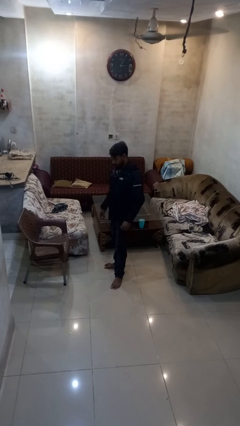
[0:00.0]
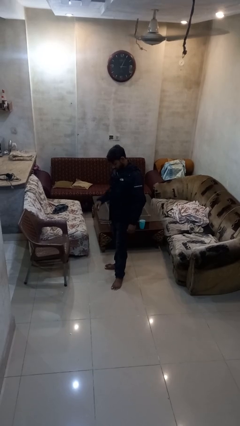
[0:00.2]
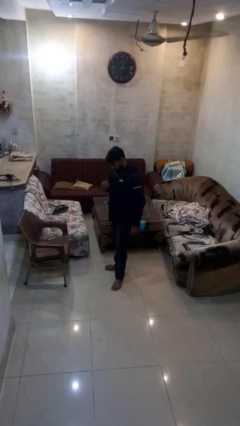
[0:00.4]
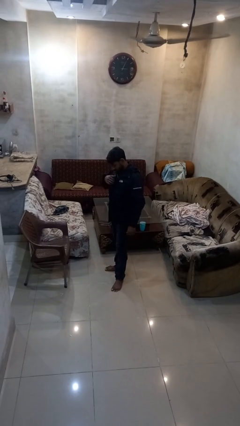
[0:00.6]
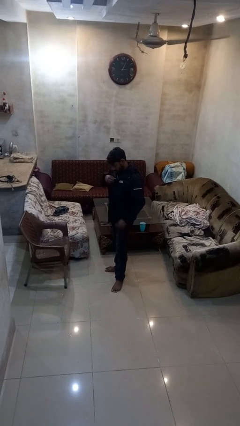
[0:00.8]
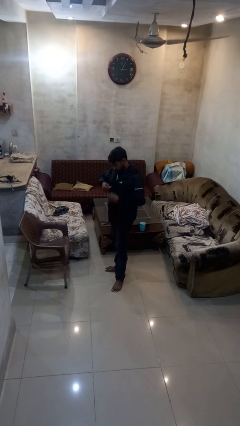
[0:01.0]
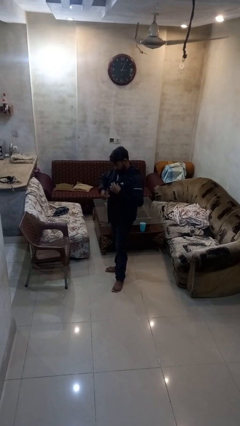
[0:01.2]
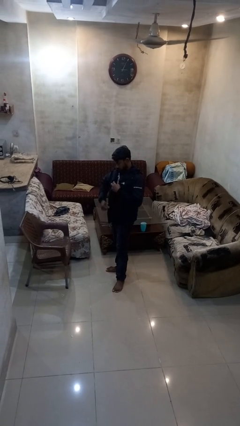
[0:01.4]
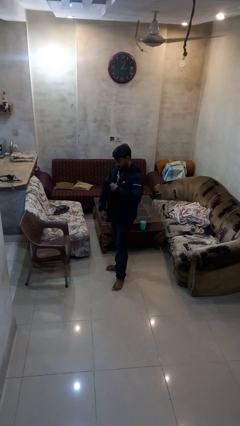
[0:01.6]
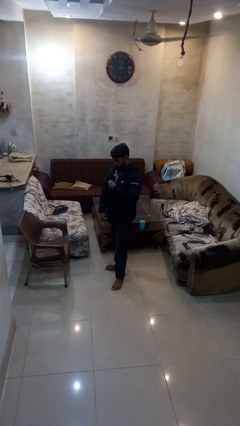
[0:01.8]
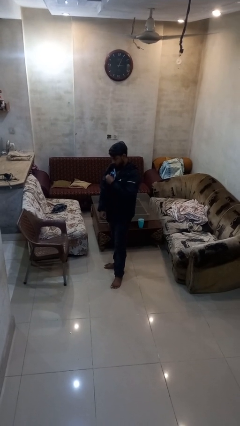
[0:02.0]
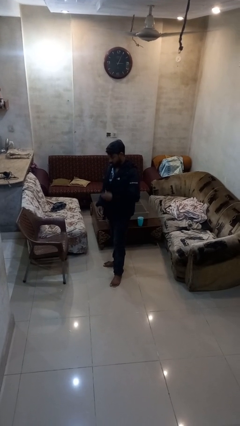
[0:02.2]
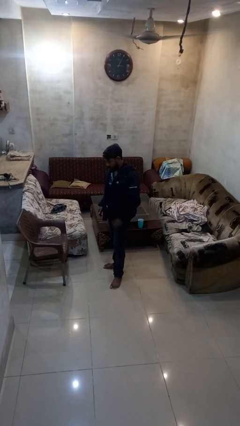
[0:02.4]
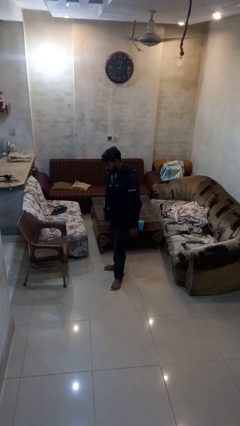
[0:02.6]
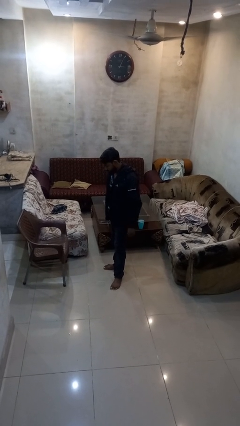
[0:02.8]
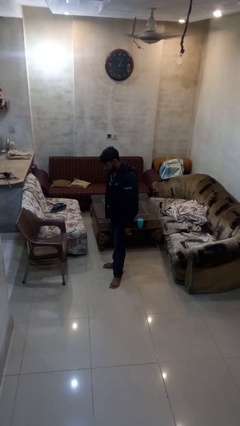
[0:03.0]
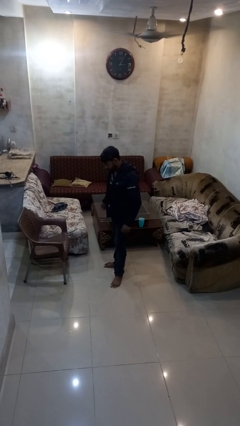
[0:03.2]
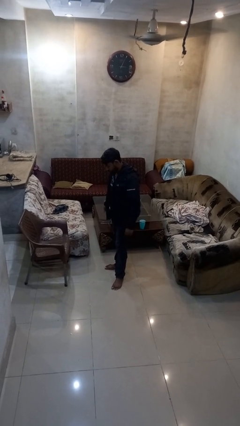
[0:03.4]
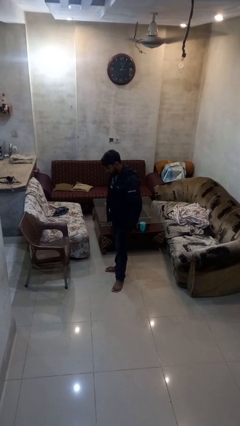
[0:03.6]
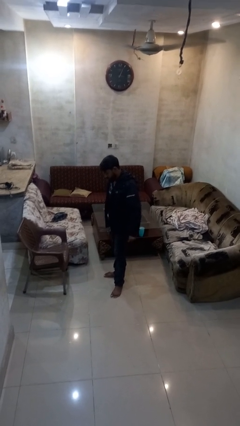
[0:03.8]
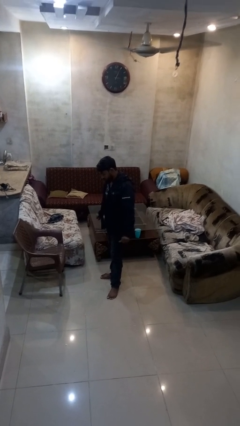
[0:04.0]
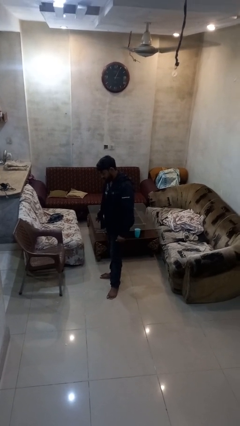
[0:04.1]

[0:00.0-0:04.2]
person unzips jacket

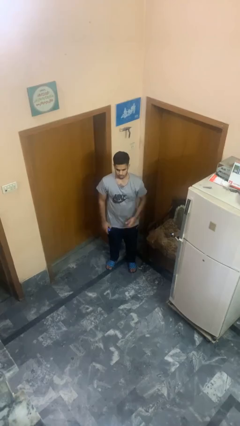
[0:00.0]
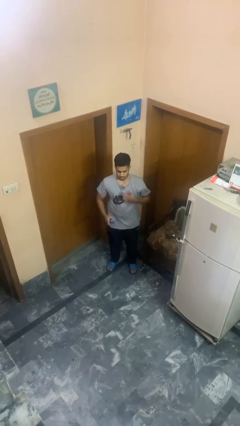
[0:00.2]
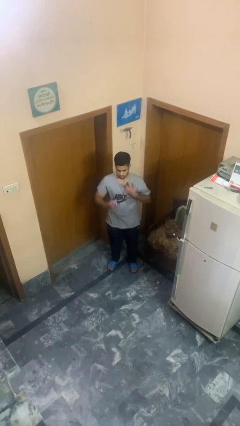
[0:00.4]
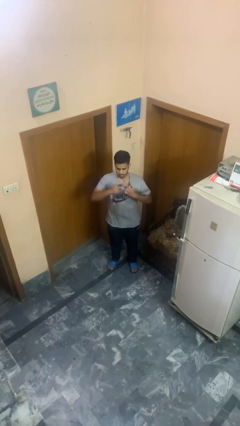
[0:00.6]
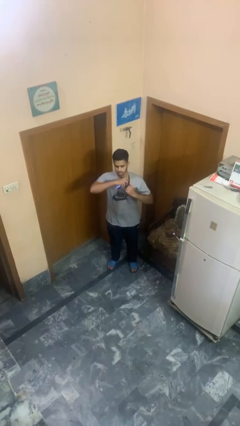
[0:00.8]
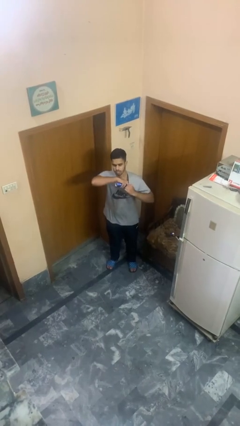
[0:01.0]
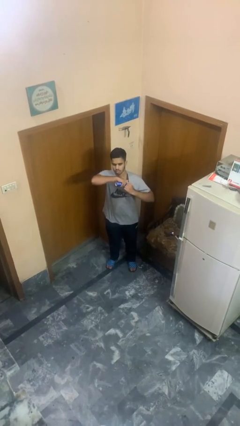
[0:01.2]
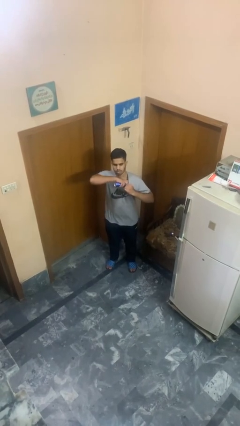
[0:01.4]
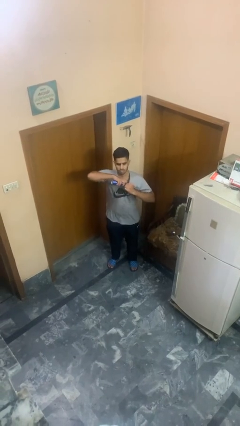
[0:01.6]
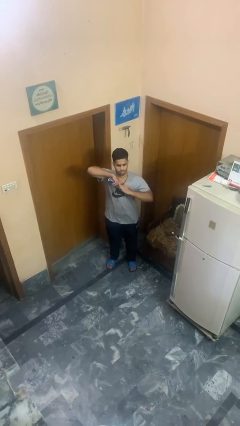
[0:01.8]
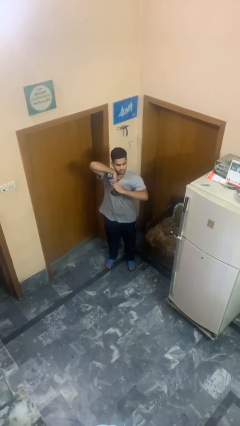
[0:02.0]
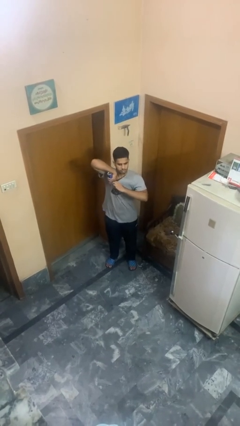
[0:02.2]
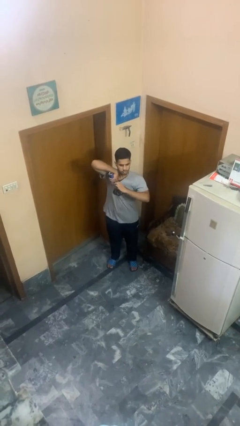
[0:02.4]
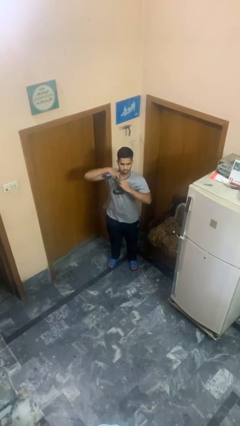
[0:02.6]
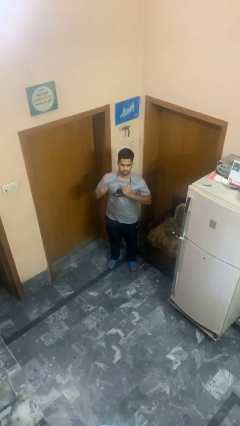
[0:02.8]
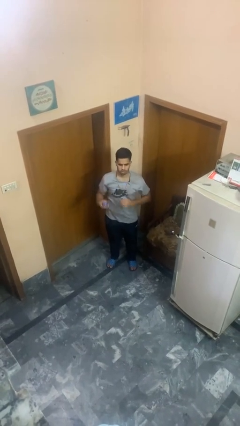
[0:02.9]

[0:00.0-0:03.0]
person applies deodorant

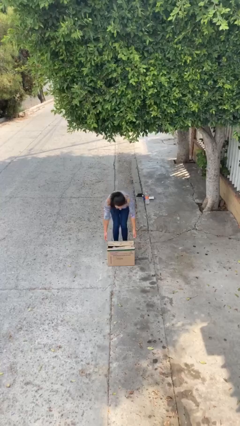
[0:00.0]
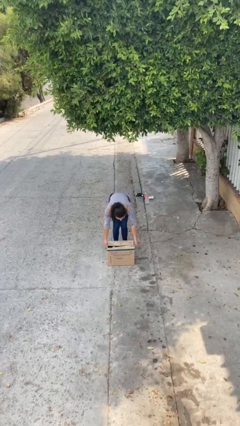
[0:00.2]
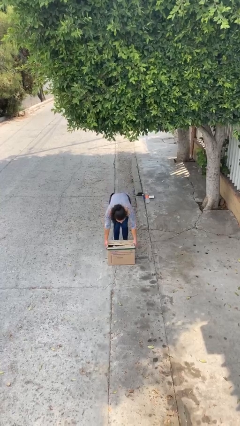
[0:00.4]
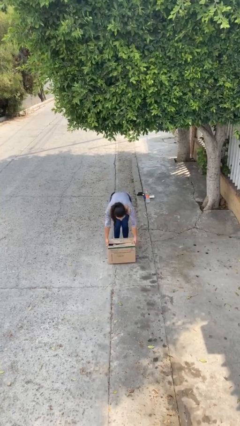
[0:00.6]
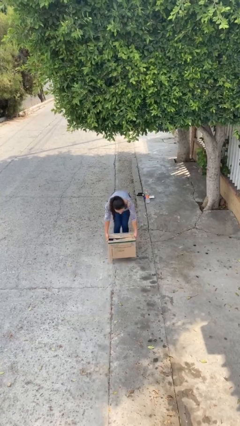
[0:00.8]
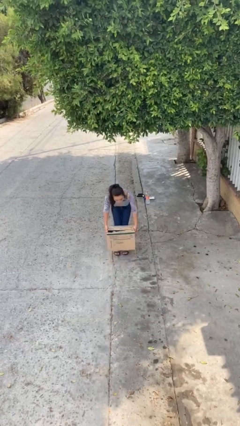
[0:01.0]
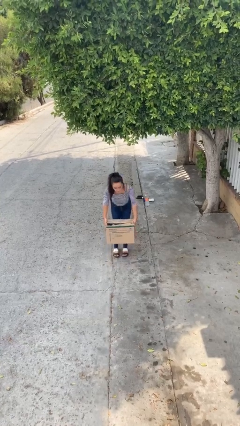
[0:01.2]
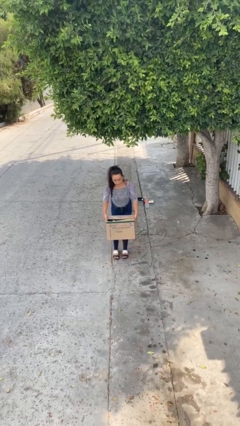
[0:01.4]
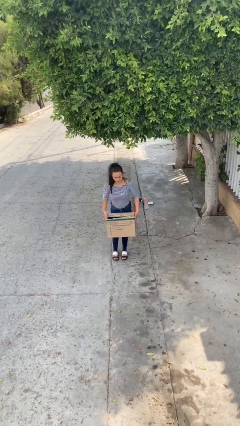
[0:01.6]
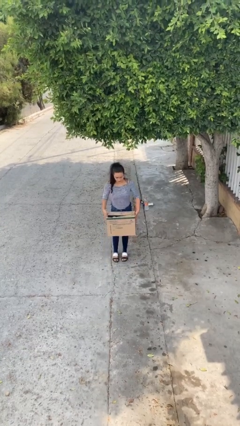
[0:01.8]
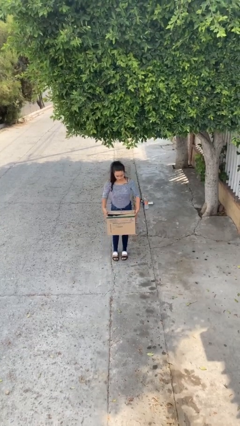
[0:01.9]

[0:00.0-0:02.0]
person picks up object from floor

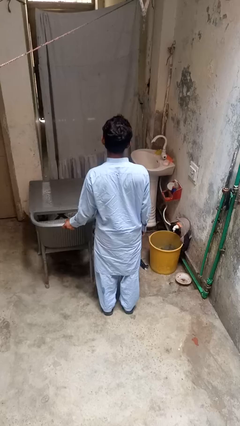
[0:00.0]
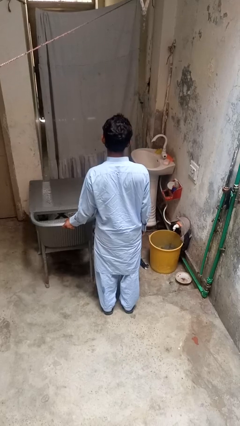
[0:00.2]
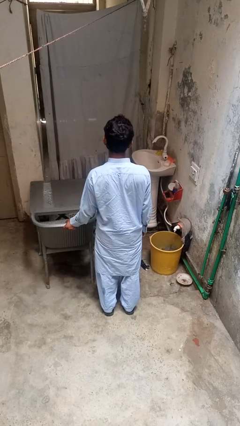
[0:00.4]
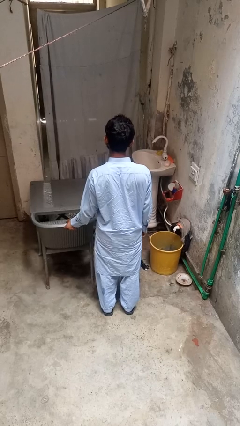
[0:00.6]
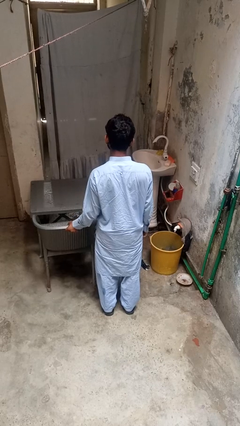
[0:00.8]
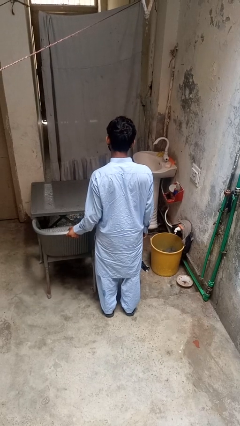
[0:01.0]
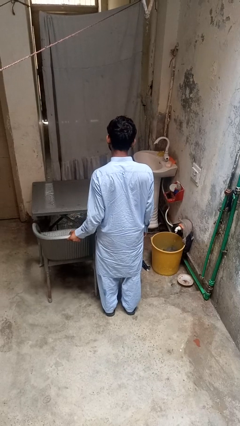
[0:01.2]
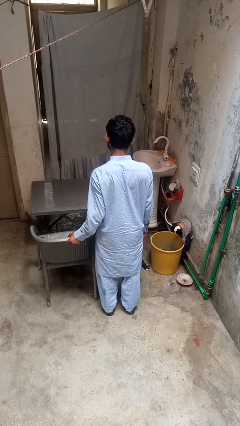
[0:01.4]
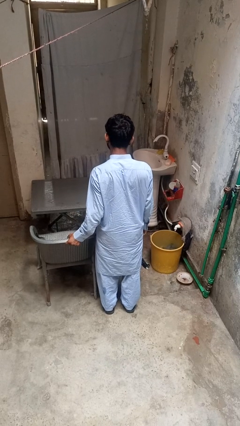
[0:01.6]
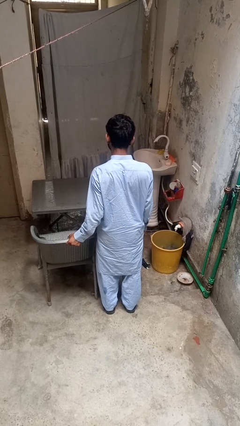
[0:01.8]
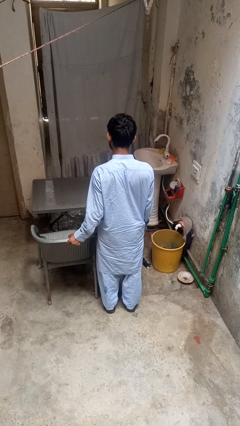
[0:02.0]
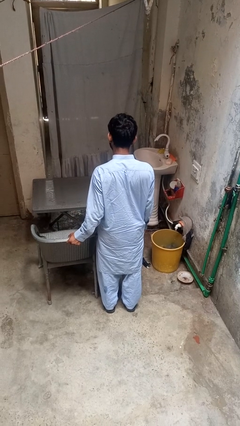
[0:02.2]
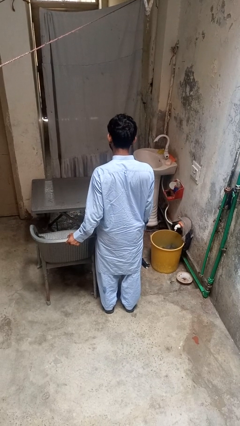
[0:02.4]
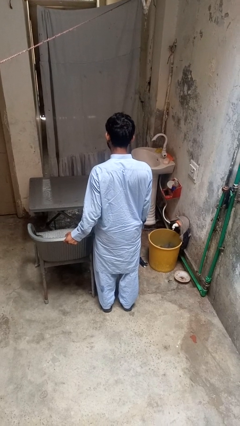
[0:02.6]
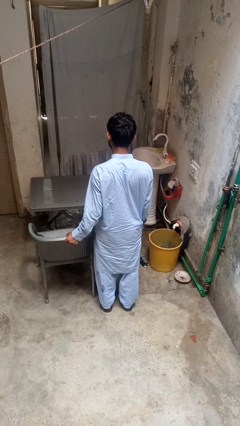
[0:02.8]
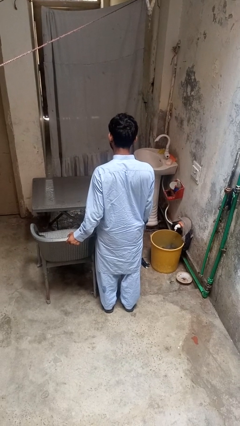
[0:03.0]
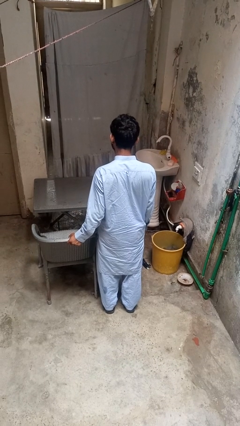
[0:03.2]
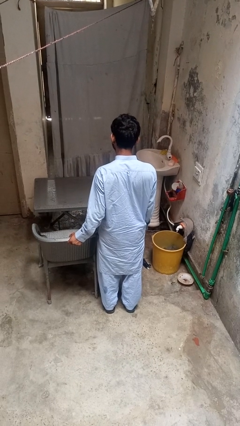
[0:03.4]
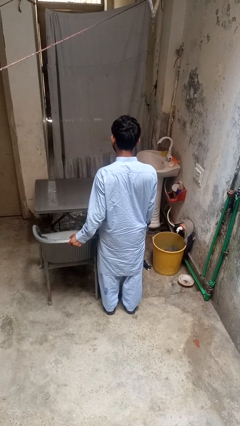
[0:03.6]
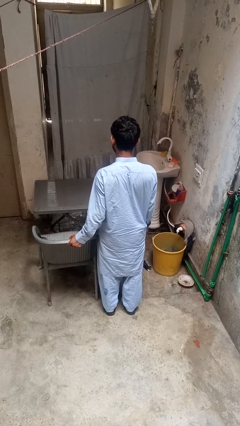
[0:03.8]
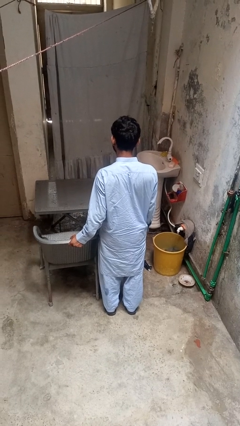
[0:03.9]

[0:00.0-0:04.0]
person pulls out chair

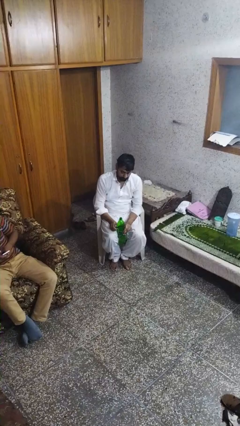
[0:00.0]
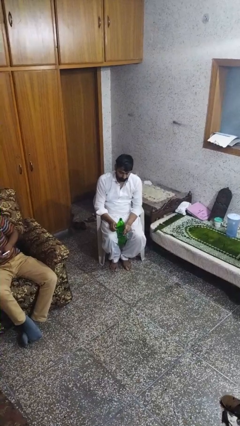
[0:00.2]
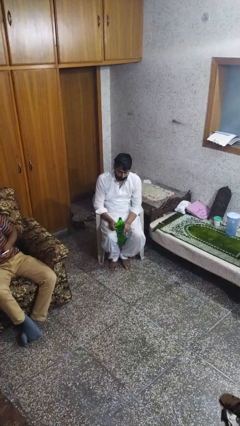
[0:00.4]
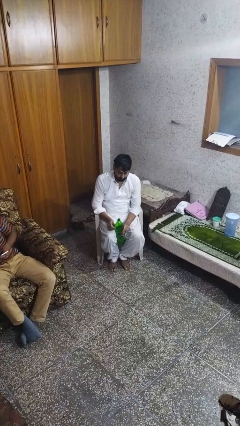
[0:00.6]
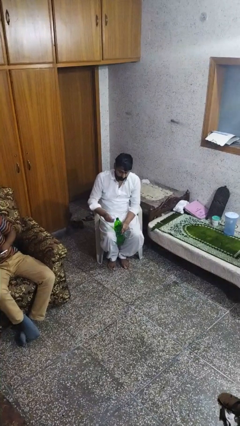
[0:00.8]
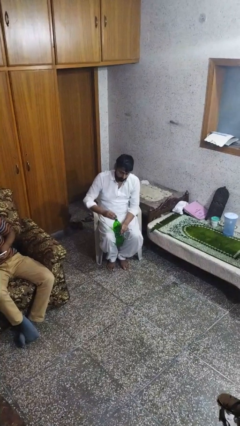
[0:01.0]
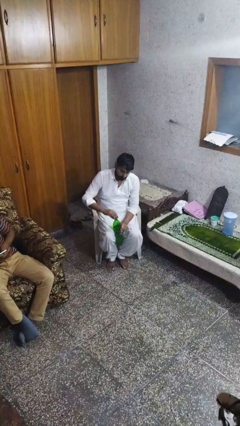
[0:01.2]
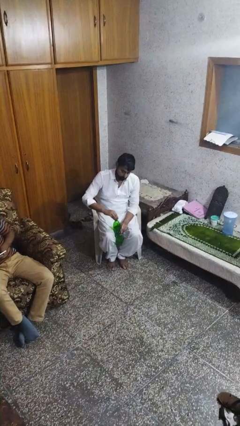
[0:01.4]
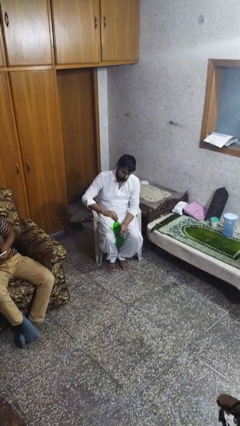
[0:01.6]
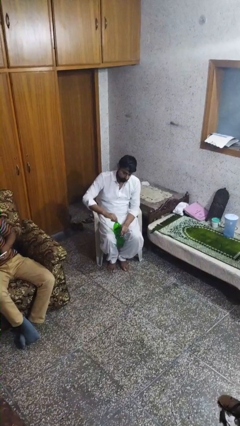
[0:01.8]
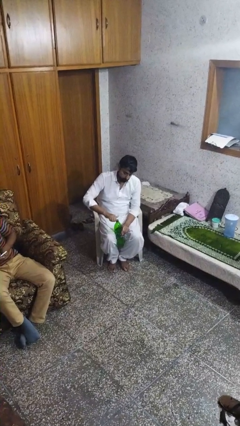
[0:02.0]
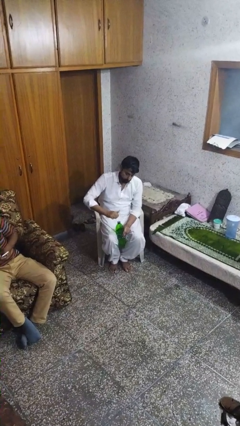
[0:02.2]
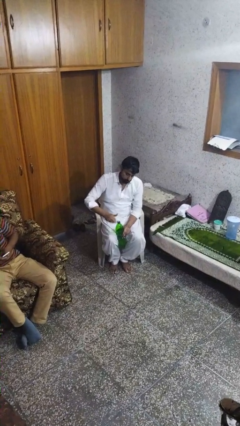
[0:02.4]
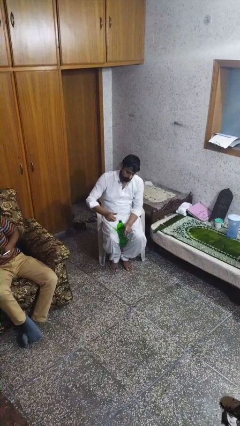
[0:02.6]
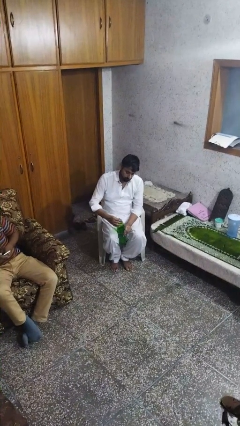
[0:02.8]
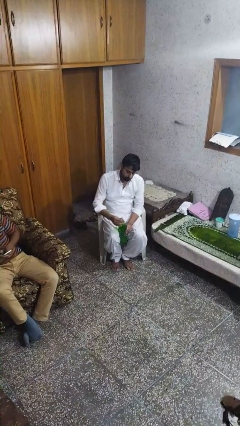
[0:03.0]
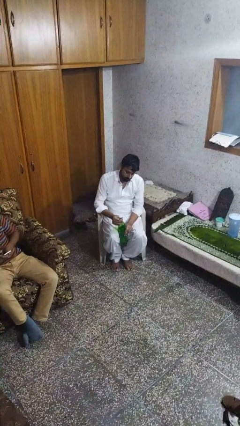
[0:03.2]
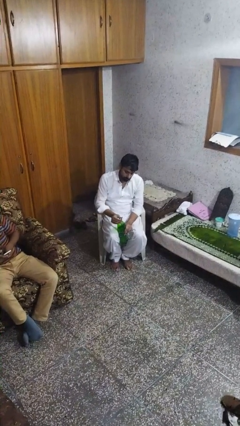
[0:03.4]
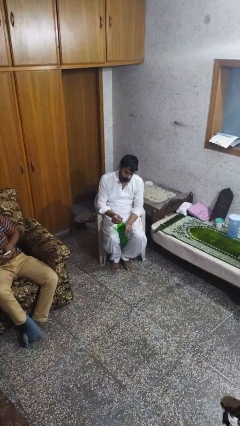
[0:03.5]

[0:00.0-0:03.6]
person screws lid to bottle

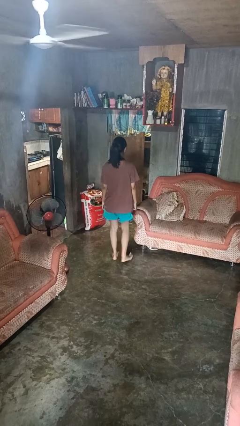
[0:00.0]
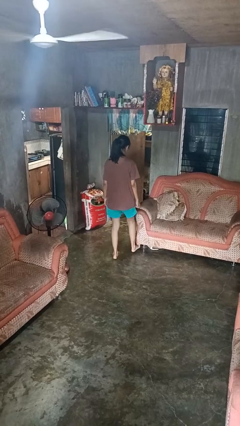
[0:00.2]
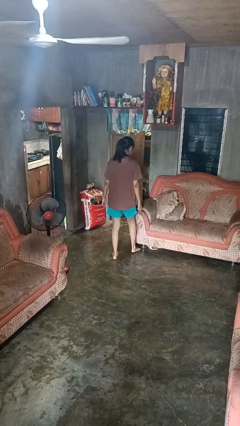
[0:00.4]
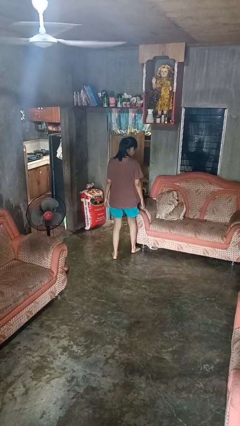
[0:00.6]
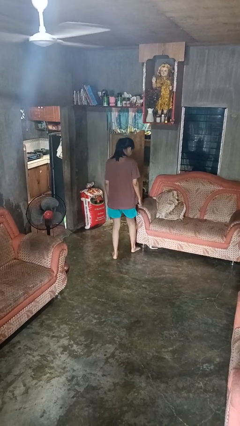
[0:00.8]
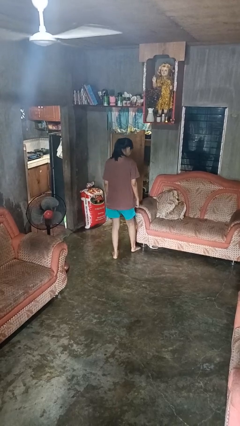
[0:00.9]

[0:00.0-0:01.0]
person stubs toe
